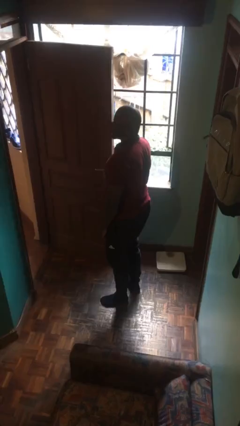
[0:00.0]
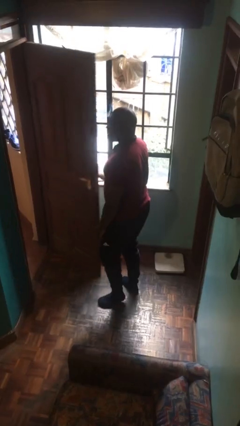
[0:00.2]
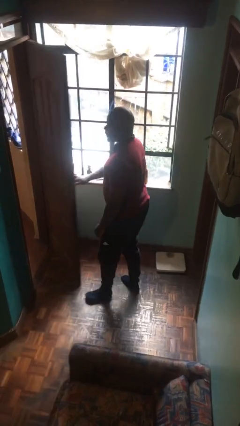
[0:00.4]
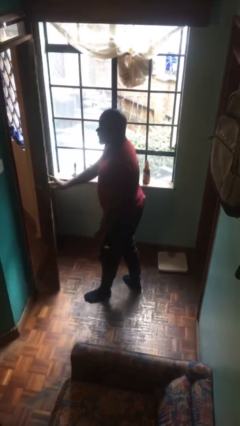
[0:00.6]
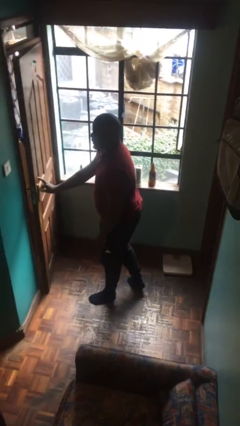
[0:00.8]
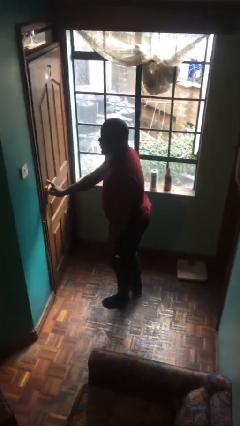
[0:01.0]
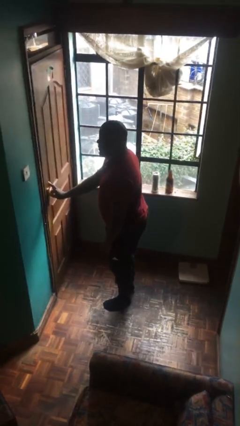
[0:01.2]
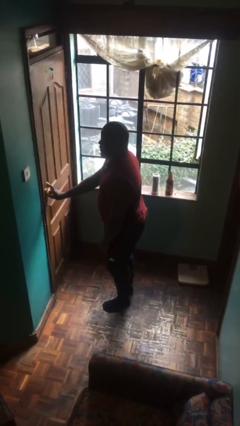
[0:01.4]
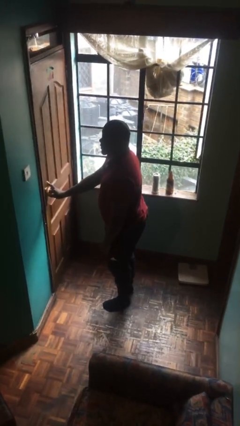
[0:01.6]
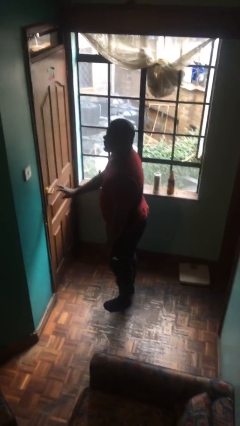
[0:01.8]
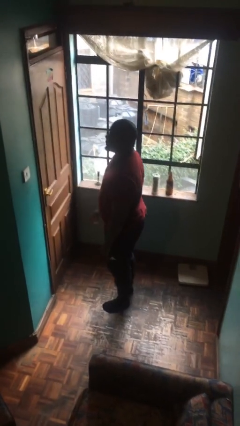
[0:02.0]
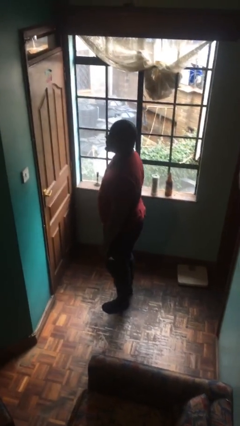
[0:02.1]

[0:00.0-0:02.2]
person closes facility door

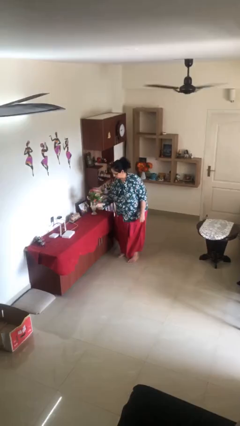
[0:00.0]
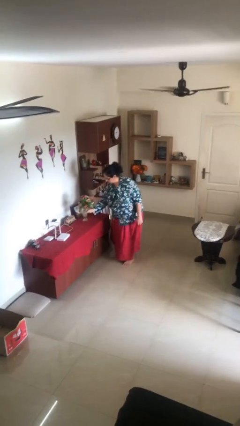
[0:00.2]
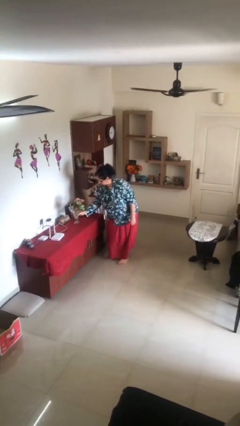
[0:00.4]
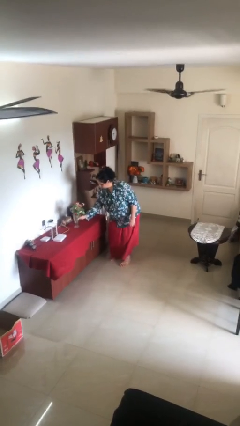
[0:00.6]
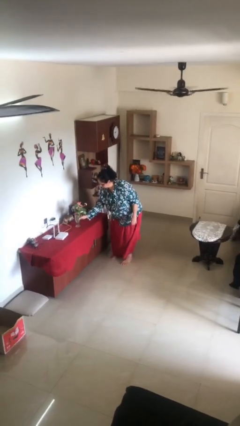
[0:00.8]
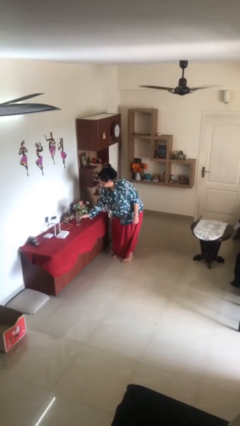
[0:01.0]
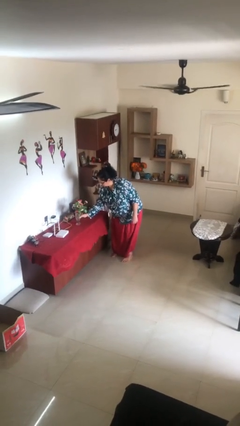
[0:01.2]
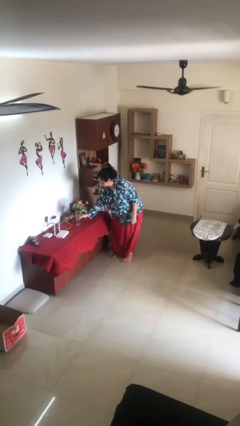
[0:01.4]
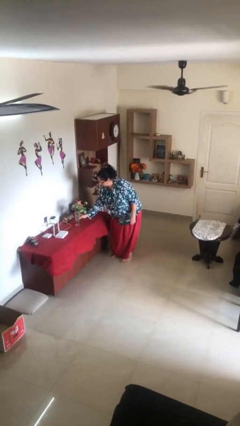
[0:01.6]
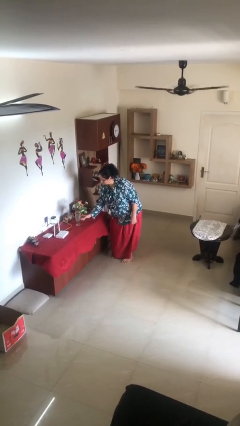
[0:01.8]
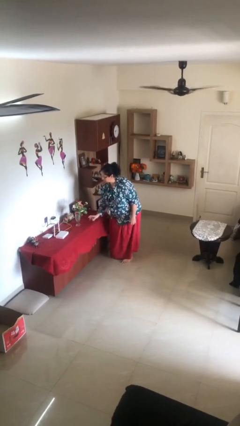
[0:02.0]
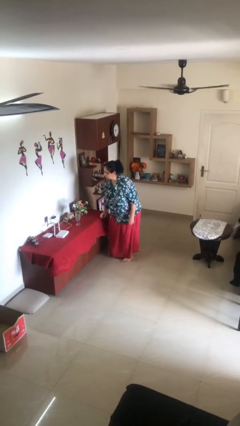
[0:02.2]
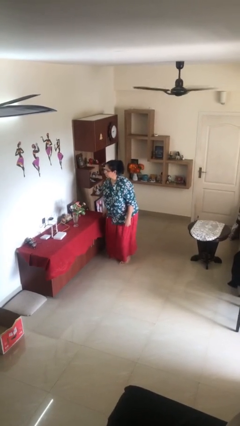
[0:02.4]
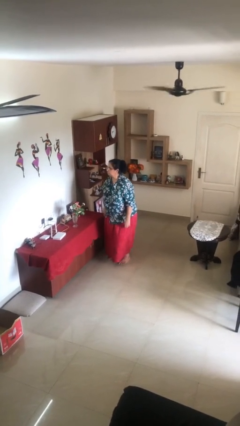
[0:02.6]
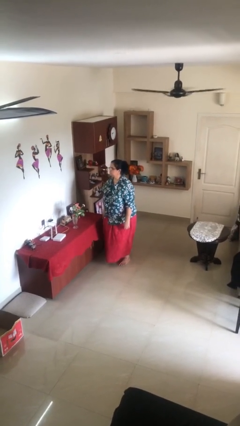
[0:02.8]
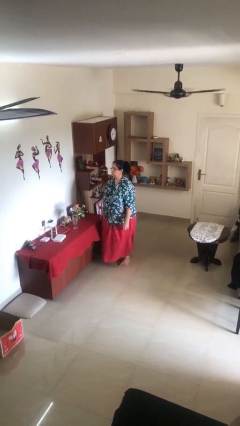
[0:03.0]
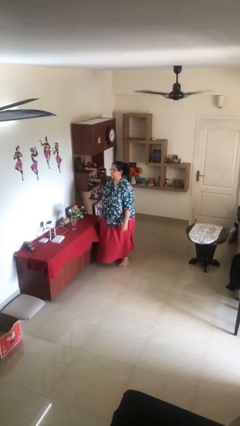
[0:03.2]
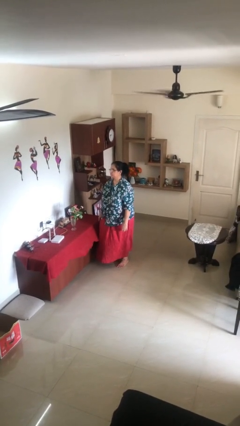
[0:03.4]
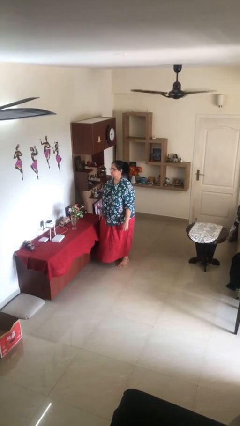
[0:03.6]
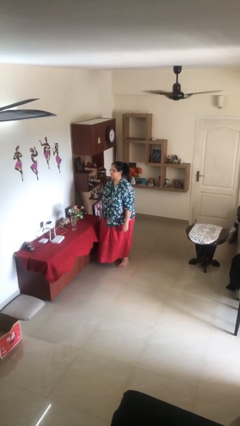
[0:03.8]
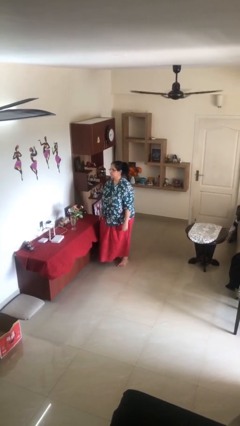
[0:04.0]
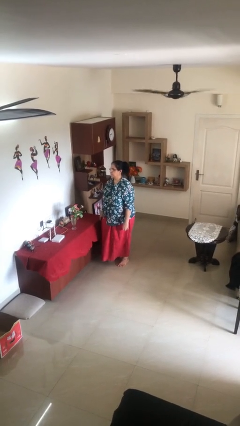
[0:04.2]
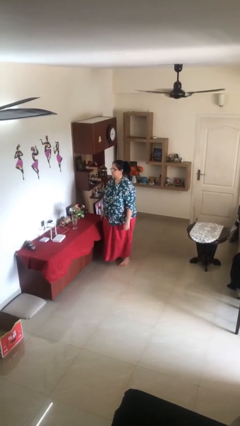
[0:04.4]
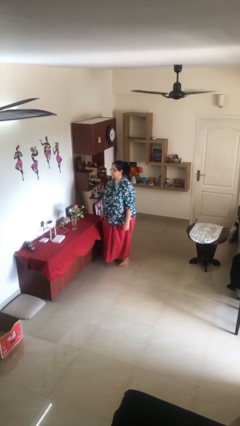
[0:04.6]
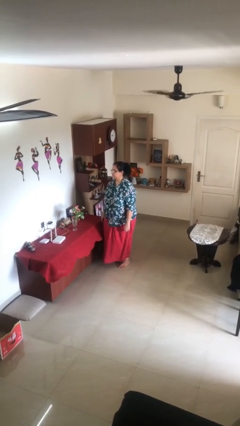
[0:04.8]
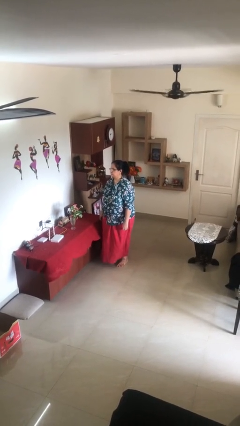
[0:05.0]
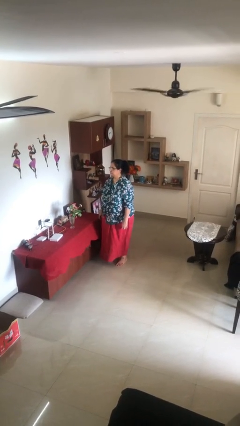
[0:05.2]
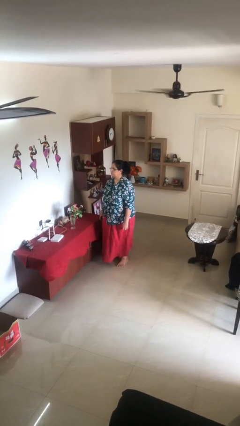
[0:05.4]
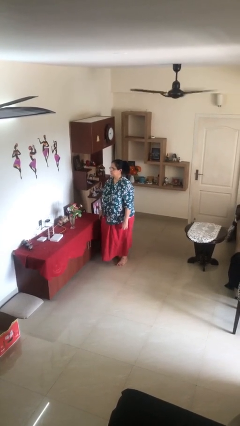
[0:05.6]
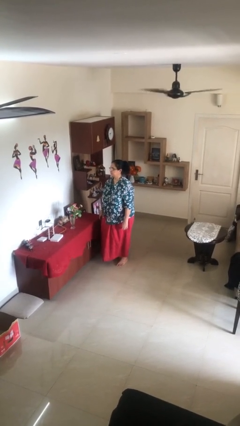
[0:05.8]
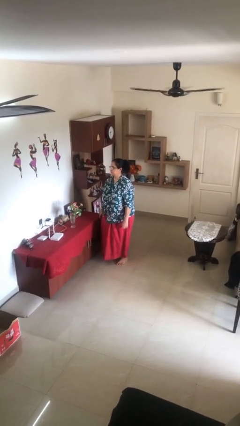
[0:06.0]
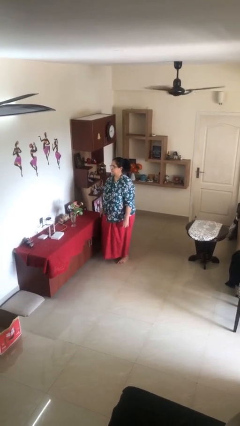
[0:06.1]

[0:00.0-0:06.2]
person puts down object on table

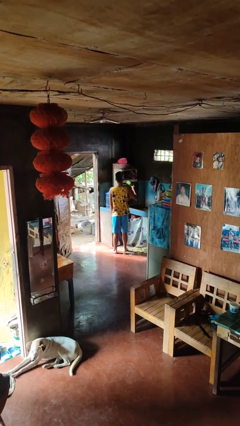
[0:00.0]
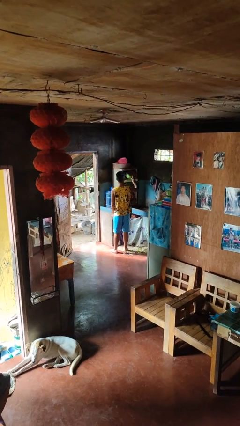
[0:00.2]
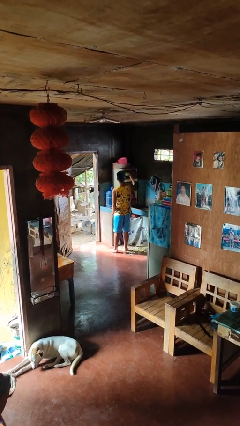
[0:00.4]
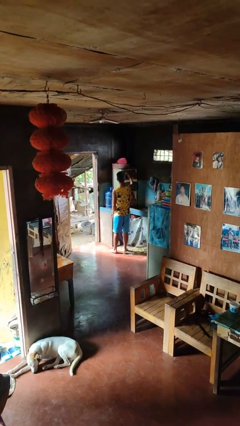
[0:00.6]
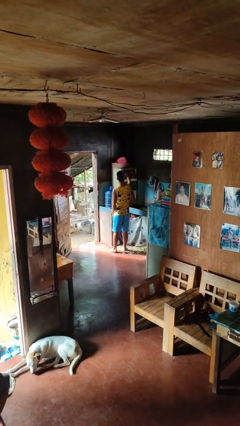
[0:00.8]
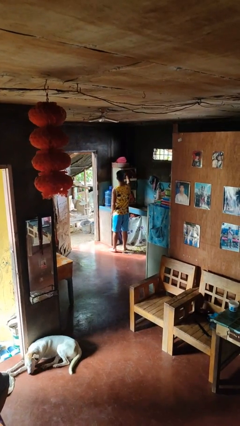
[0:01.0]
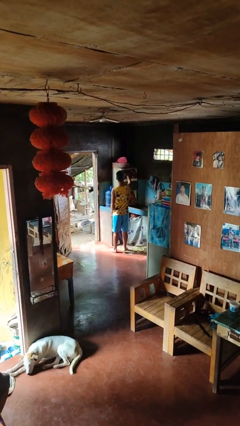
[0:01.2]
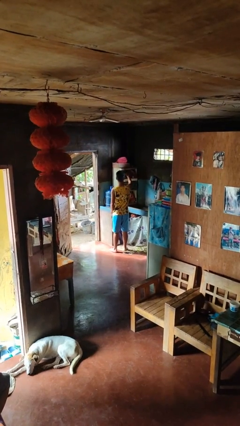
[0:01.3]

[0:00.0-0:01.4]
person puts object in cabinet

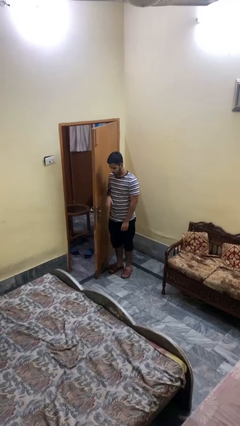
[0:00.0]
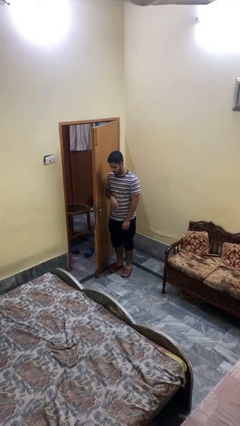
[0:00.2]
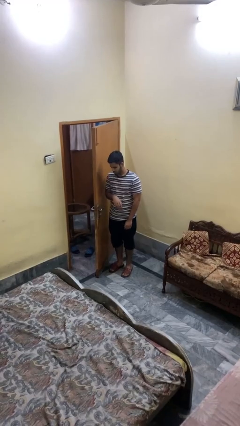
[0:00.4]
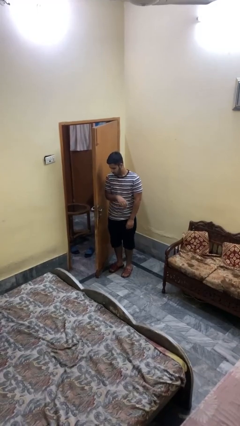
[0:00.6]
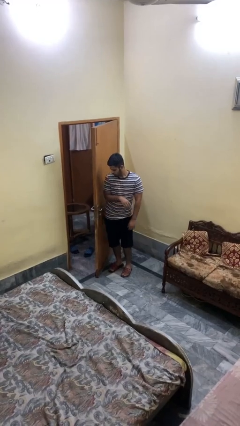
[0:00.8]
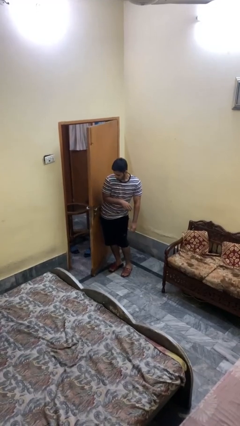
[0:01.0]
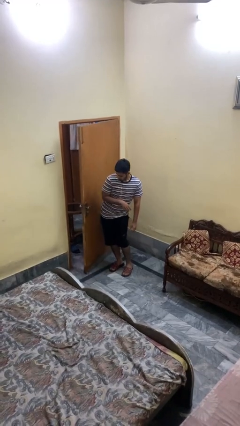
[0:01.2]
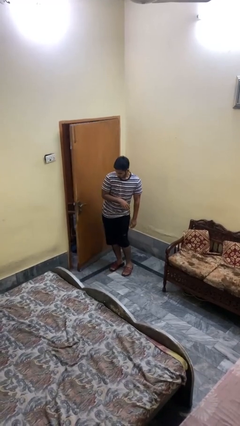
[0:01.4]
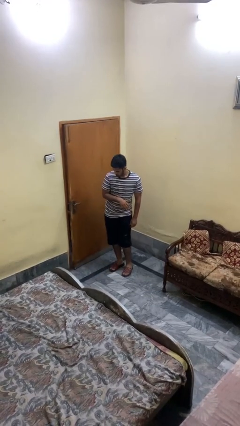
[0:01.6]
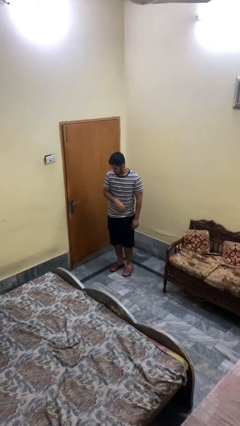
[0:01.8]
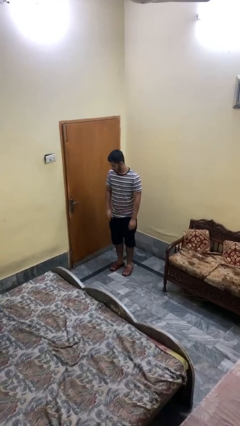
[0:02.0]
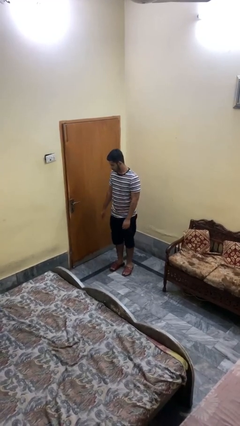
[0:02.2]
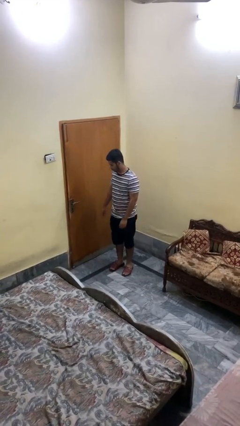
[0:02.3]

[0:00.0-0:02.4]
person closes door with hip

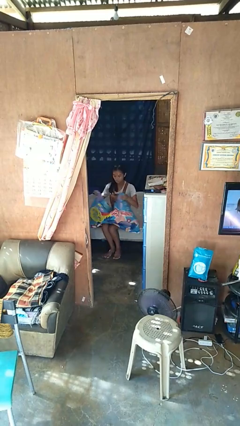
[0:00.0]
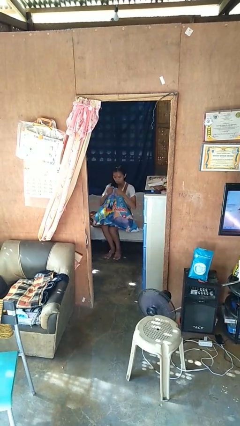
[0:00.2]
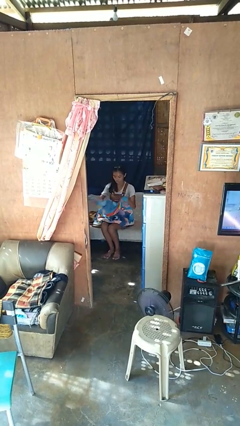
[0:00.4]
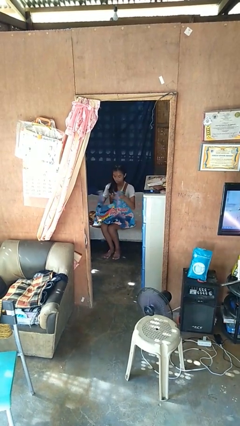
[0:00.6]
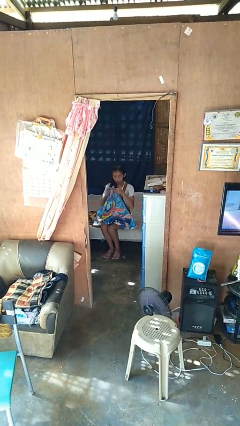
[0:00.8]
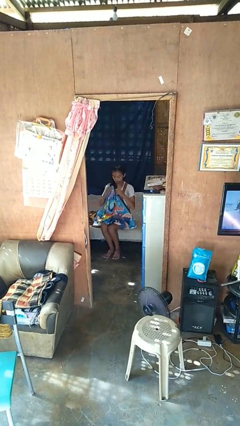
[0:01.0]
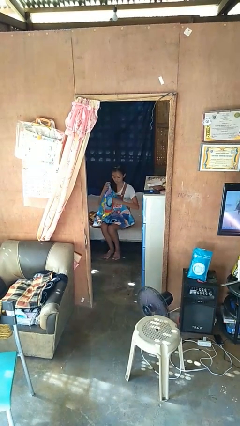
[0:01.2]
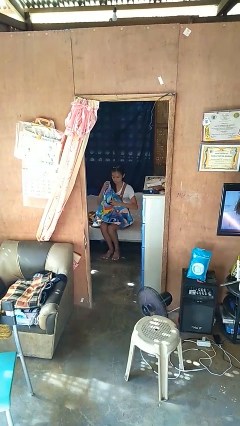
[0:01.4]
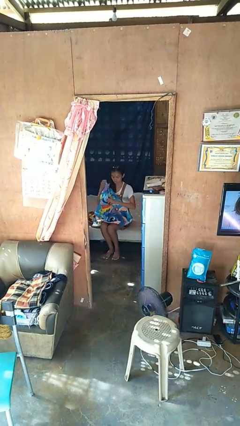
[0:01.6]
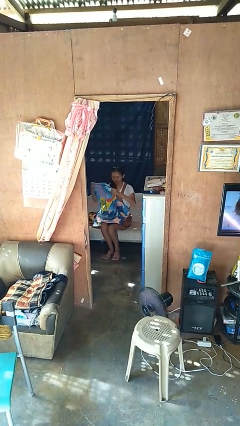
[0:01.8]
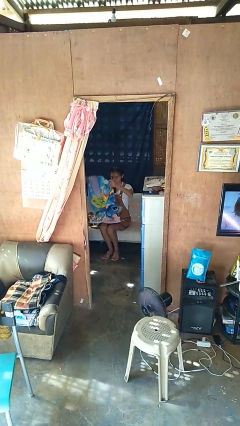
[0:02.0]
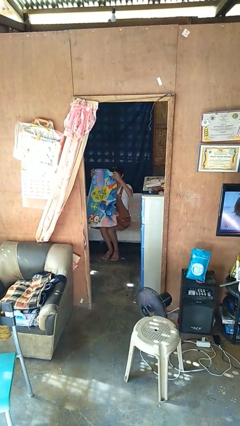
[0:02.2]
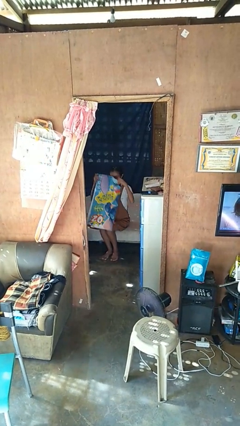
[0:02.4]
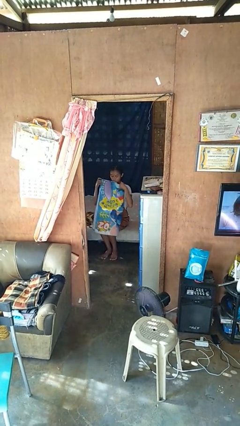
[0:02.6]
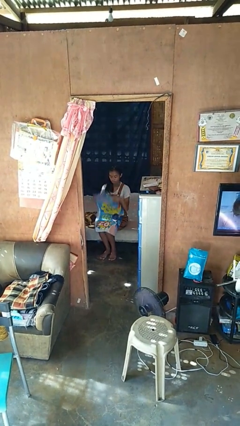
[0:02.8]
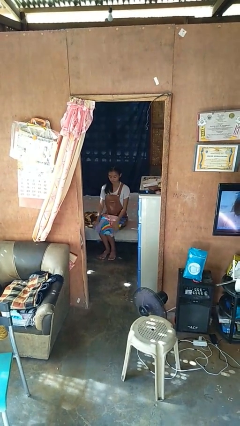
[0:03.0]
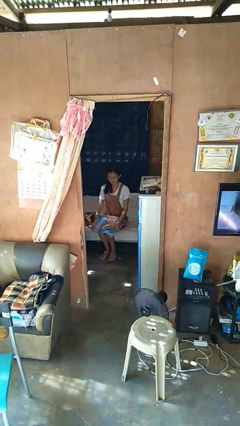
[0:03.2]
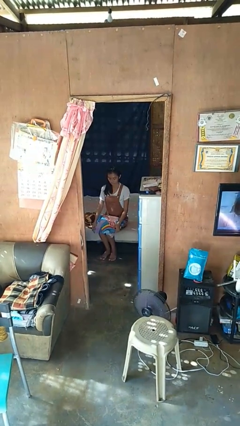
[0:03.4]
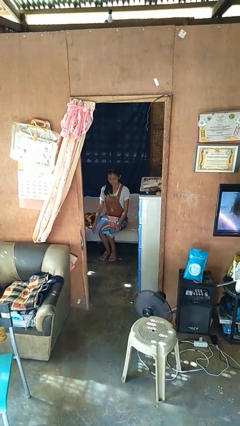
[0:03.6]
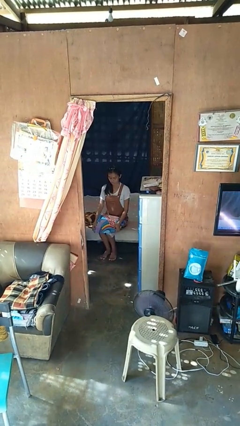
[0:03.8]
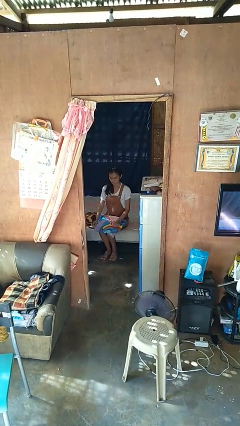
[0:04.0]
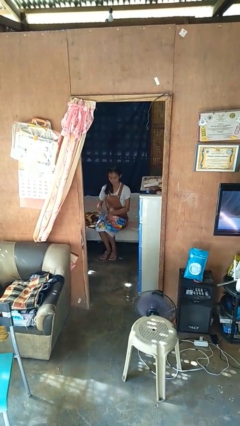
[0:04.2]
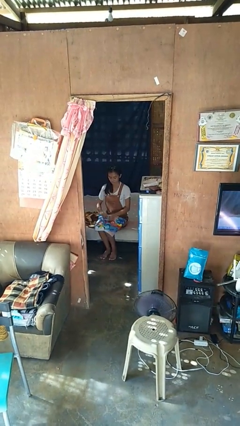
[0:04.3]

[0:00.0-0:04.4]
person folds blanket

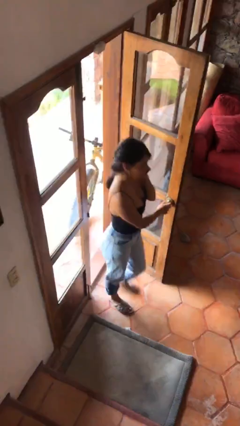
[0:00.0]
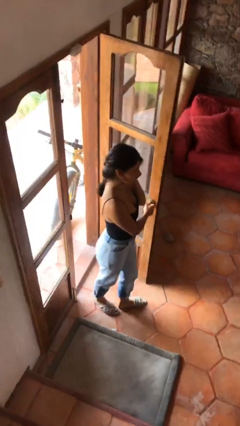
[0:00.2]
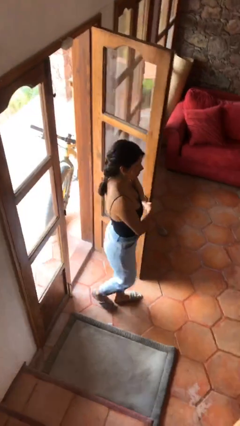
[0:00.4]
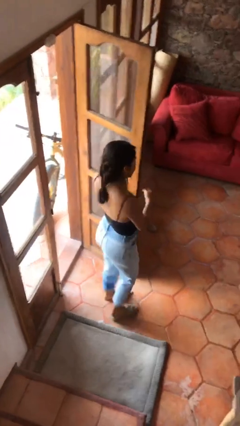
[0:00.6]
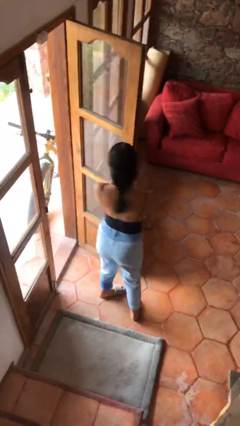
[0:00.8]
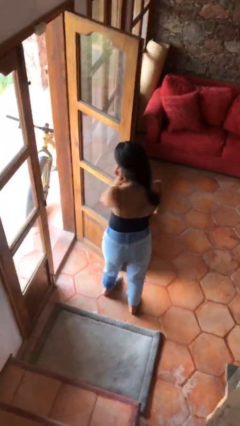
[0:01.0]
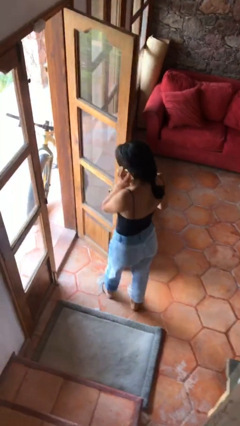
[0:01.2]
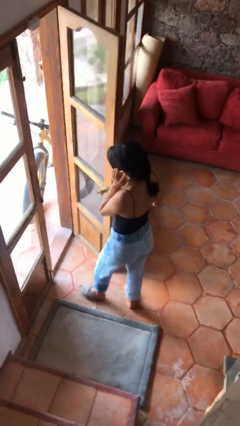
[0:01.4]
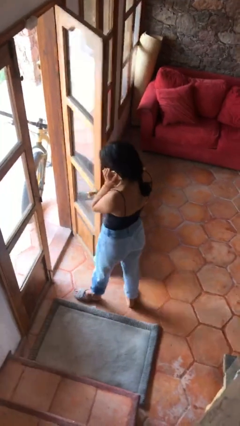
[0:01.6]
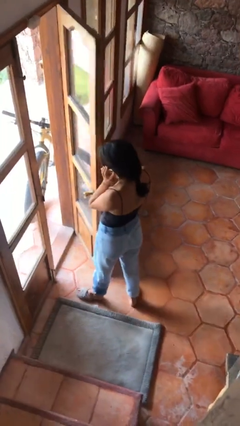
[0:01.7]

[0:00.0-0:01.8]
person enters scene through structure
